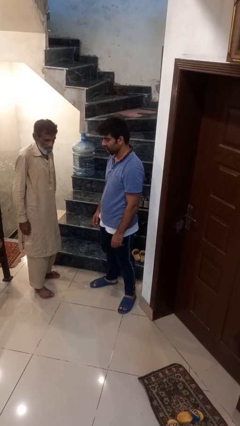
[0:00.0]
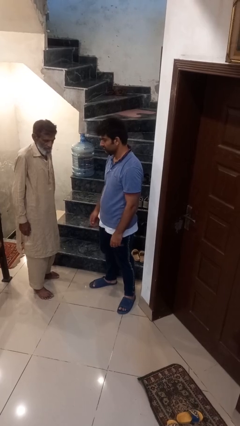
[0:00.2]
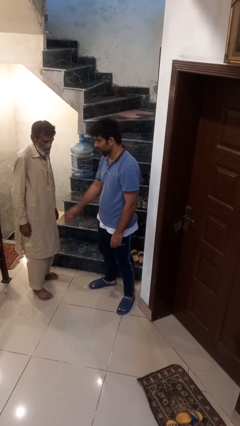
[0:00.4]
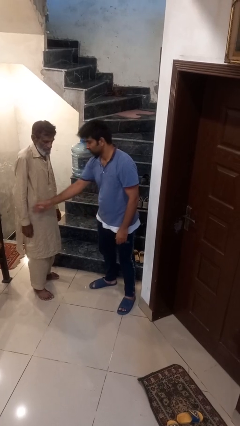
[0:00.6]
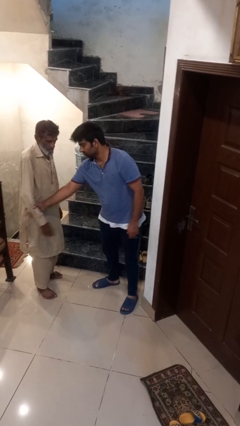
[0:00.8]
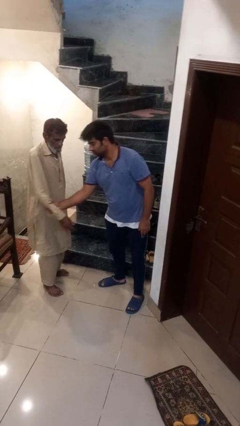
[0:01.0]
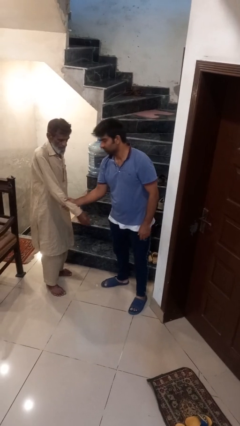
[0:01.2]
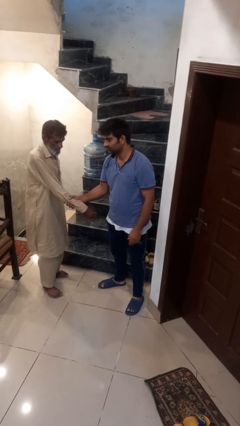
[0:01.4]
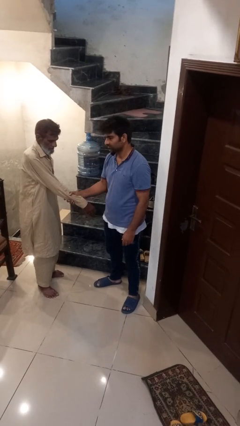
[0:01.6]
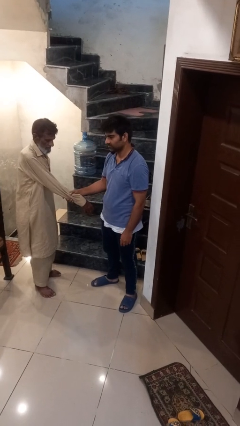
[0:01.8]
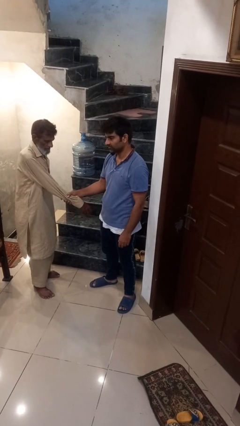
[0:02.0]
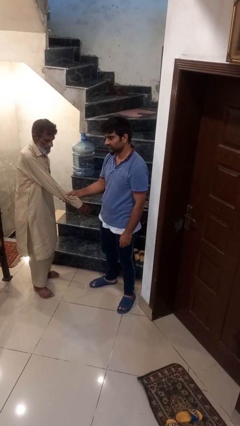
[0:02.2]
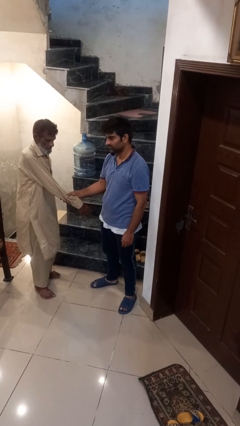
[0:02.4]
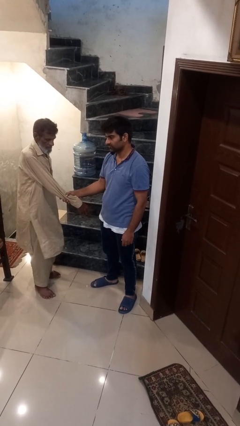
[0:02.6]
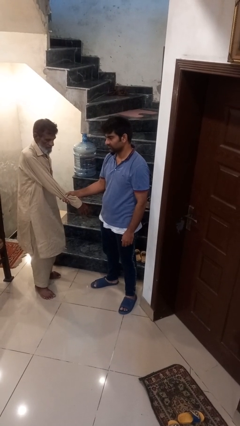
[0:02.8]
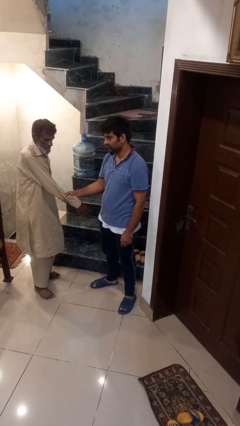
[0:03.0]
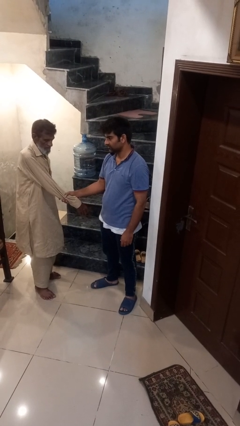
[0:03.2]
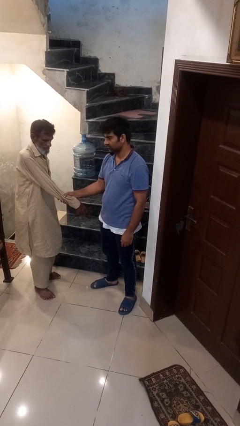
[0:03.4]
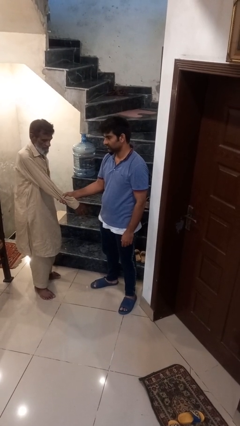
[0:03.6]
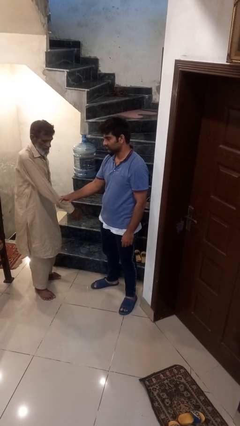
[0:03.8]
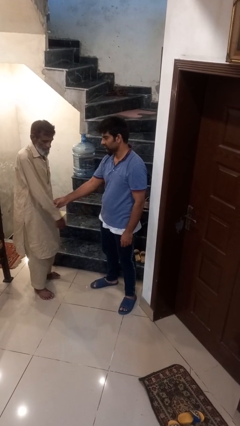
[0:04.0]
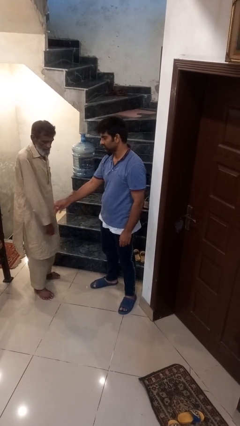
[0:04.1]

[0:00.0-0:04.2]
person grabs person by forearm

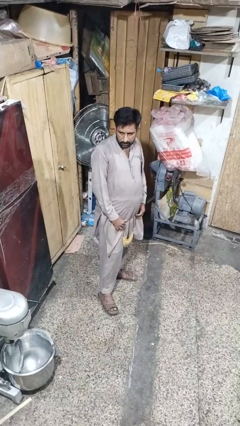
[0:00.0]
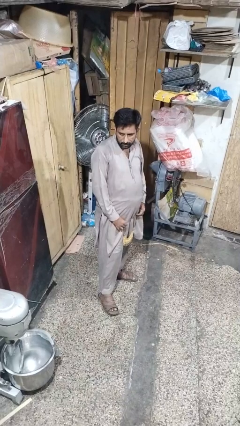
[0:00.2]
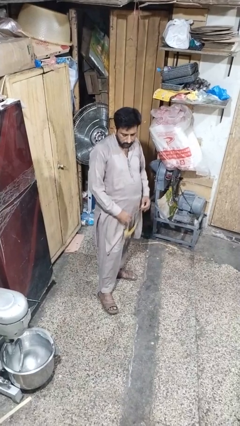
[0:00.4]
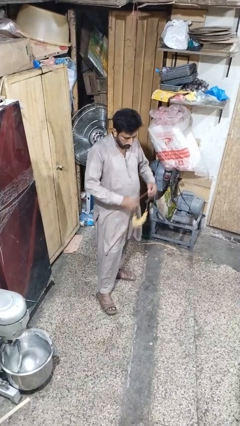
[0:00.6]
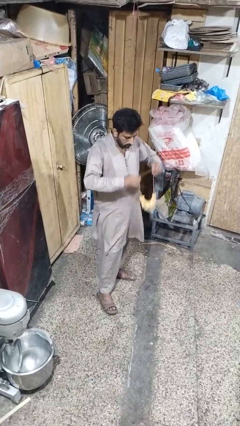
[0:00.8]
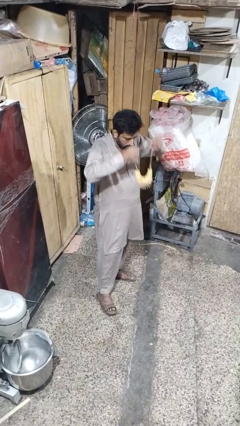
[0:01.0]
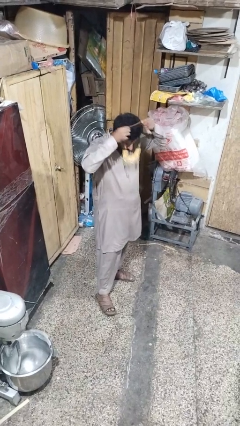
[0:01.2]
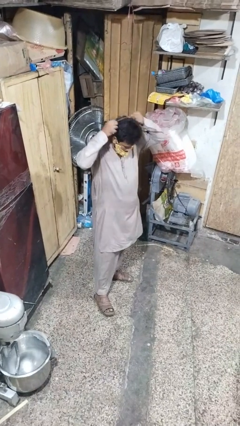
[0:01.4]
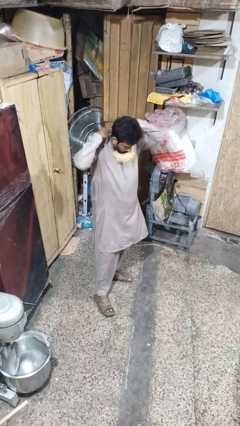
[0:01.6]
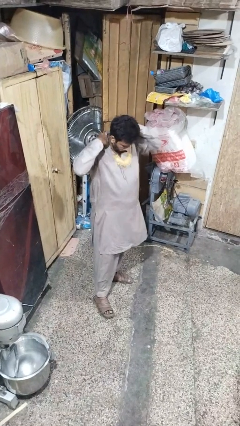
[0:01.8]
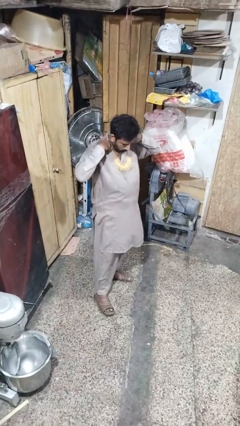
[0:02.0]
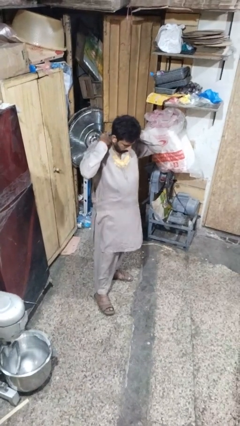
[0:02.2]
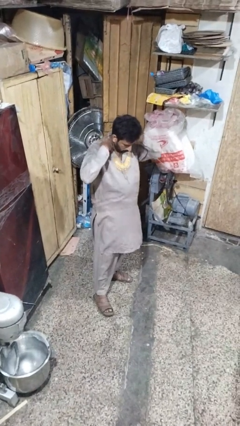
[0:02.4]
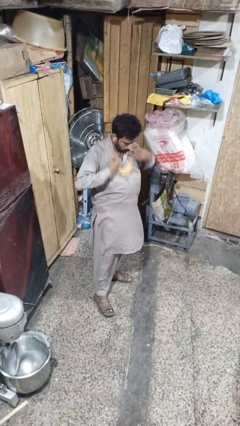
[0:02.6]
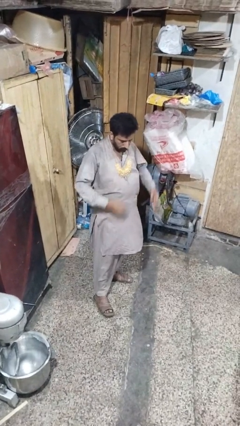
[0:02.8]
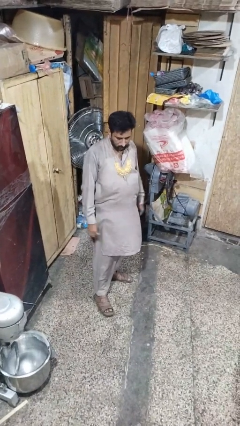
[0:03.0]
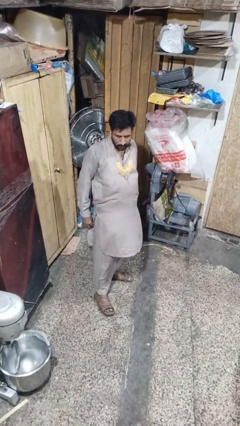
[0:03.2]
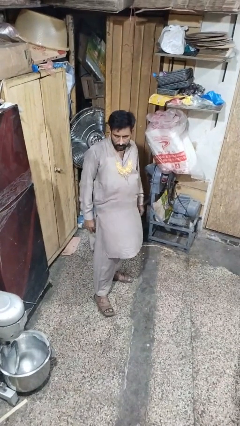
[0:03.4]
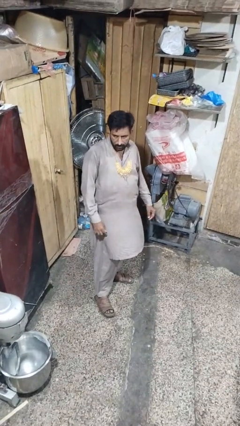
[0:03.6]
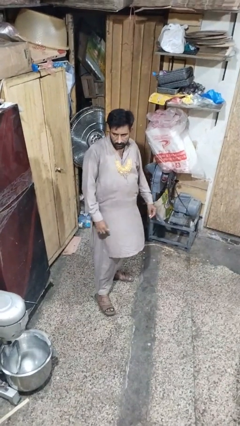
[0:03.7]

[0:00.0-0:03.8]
person puts on necklace

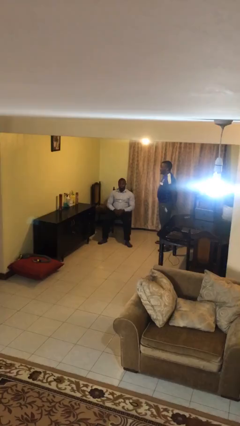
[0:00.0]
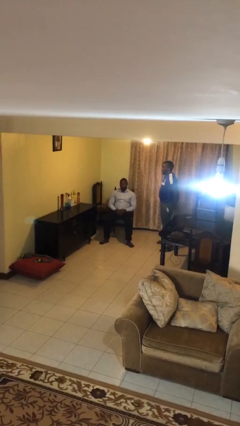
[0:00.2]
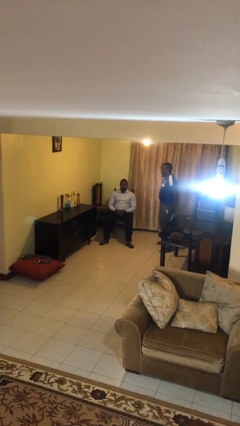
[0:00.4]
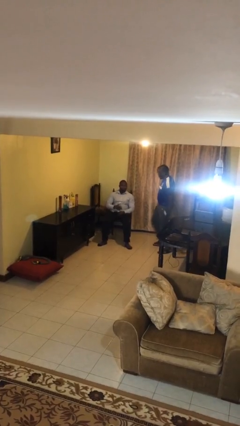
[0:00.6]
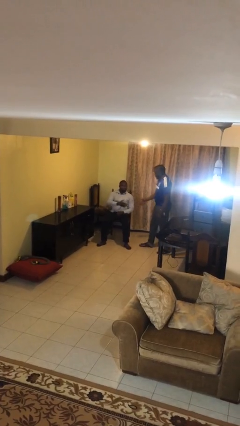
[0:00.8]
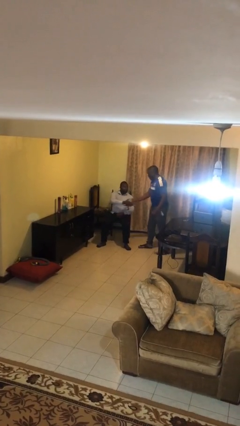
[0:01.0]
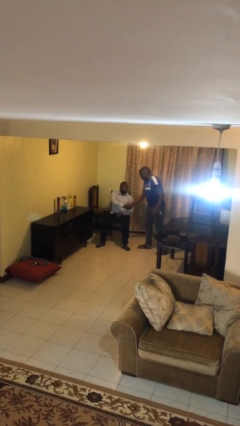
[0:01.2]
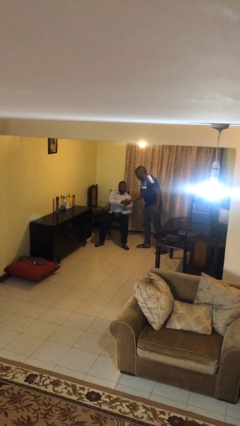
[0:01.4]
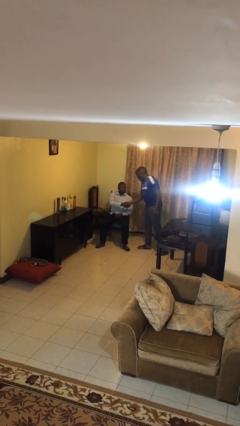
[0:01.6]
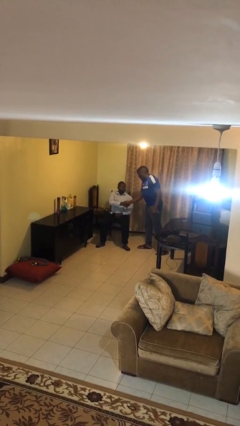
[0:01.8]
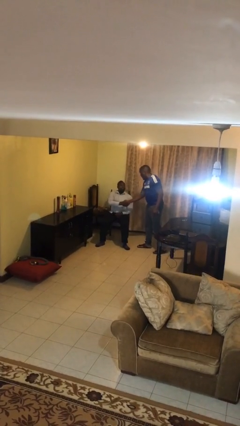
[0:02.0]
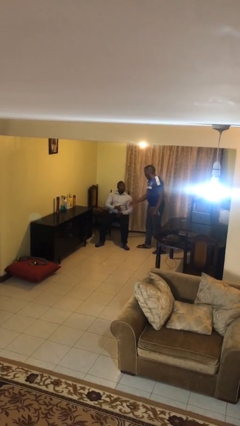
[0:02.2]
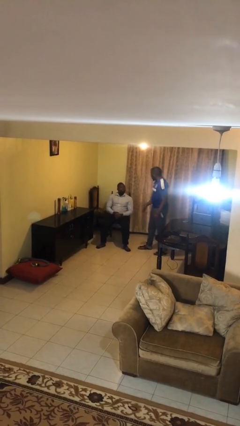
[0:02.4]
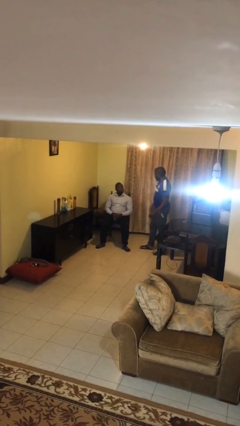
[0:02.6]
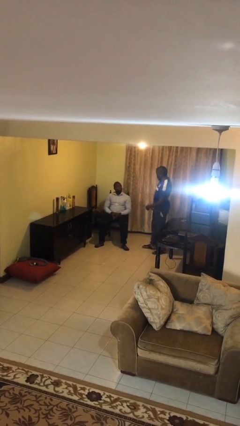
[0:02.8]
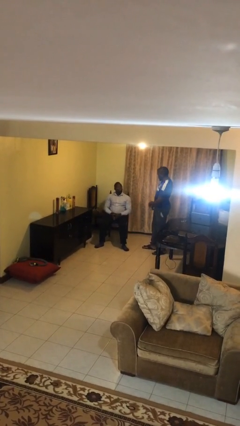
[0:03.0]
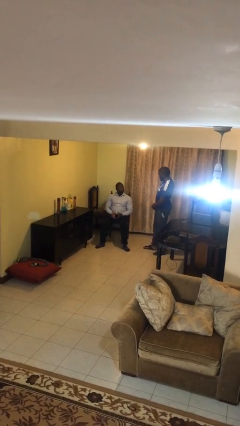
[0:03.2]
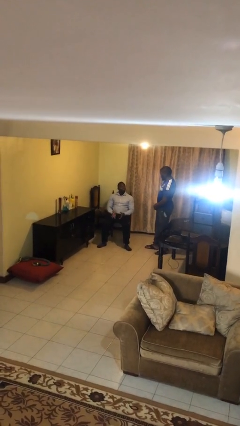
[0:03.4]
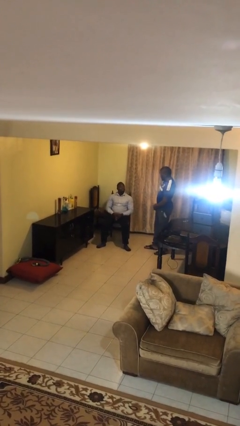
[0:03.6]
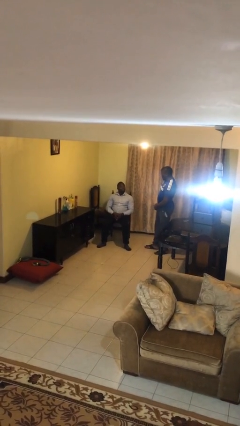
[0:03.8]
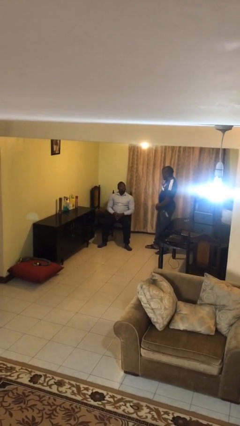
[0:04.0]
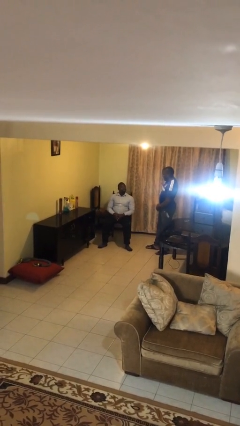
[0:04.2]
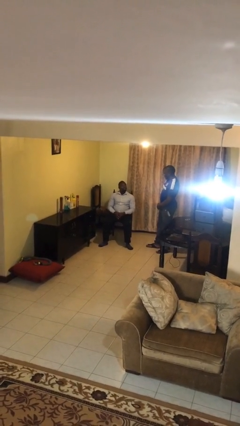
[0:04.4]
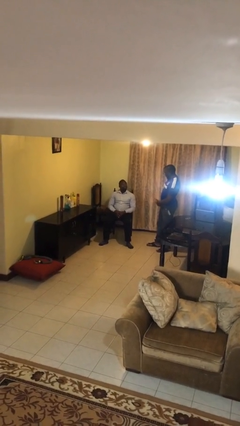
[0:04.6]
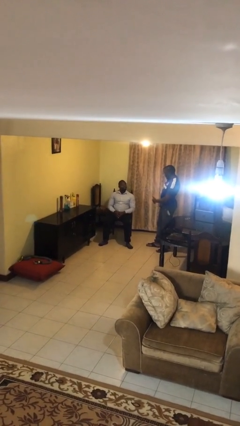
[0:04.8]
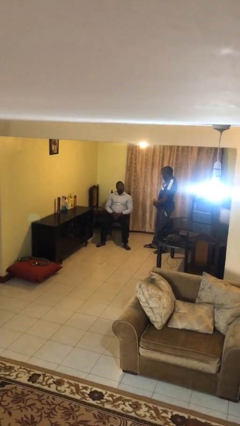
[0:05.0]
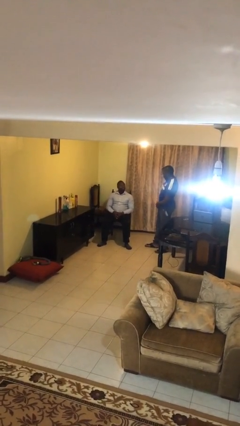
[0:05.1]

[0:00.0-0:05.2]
person shakes hand

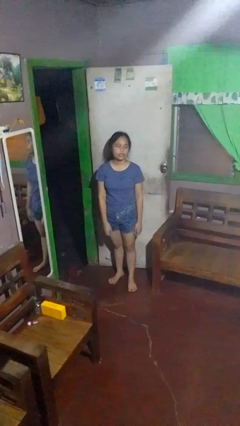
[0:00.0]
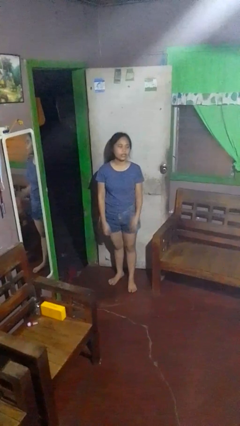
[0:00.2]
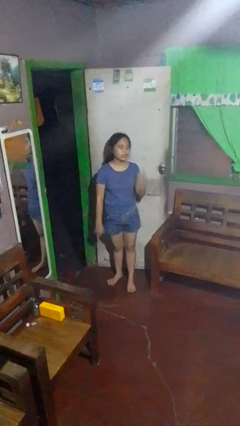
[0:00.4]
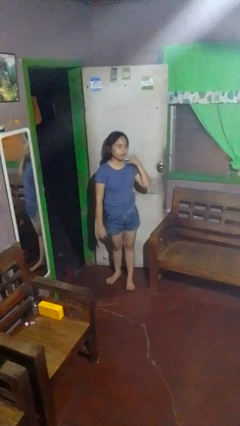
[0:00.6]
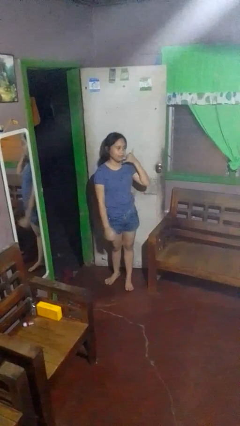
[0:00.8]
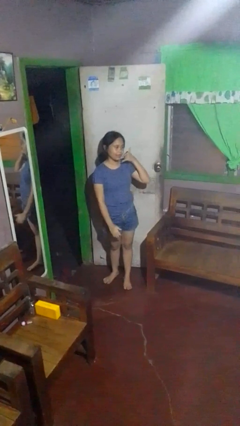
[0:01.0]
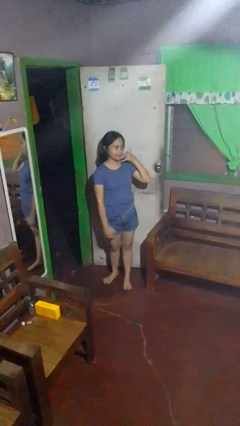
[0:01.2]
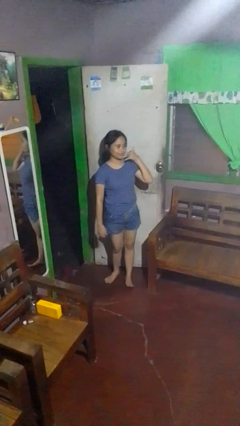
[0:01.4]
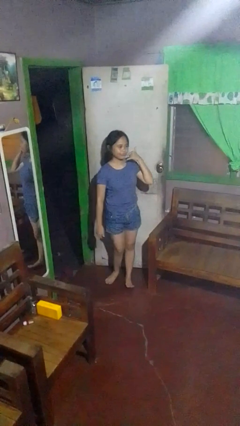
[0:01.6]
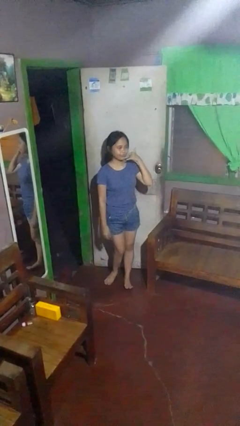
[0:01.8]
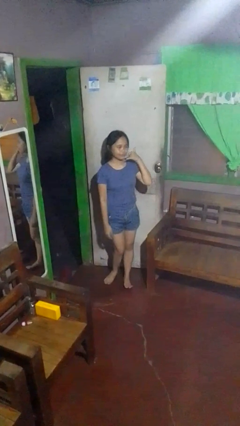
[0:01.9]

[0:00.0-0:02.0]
person gestures call me

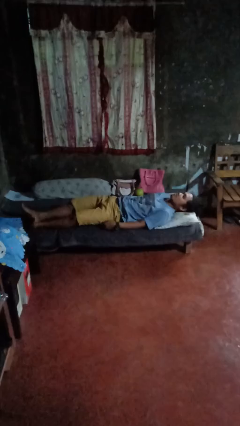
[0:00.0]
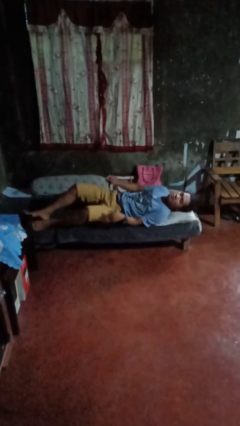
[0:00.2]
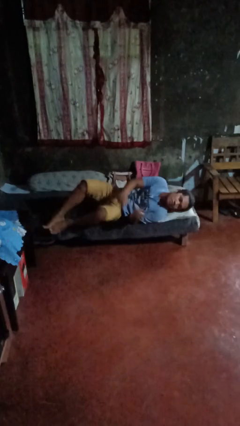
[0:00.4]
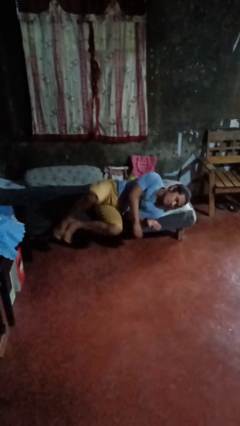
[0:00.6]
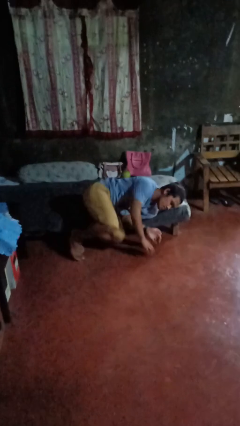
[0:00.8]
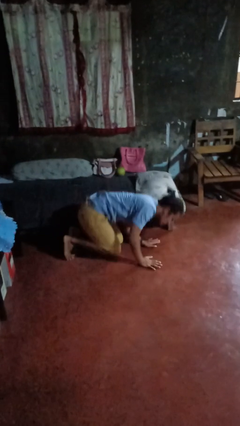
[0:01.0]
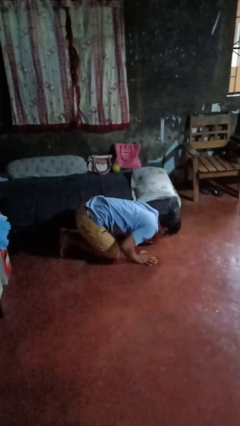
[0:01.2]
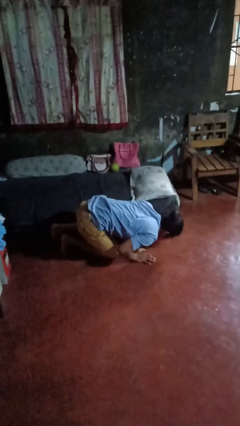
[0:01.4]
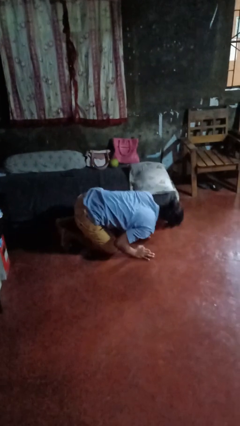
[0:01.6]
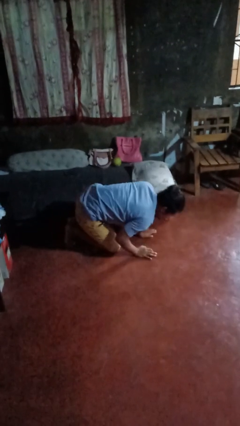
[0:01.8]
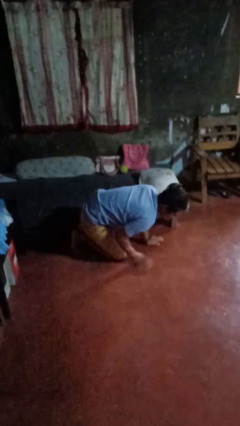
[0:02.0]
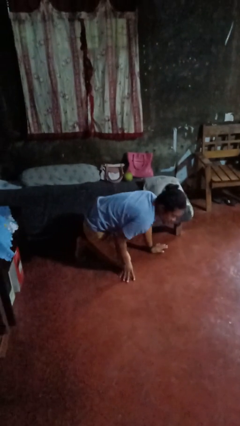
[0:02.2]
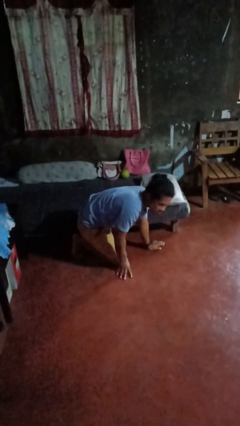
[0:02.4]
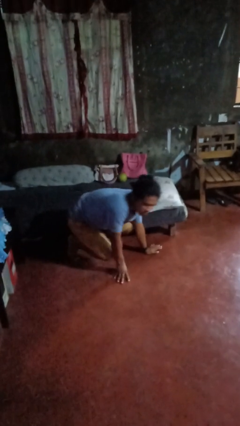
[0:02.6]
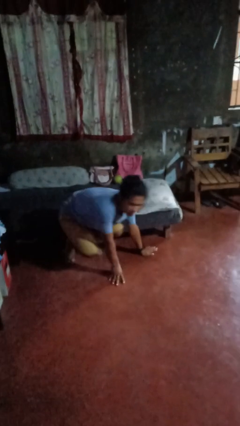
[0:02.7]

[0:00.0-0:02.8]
person falls from bed
